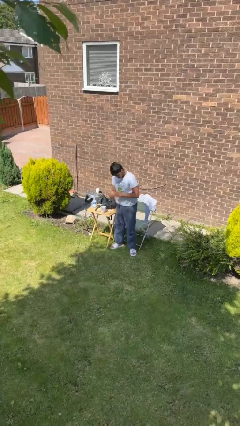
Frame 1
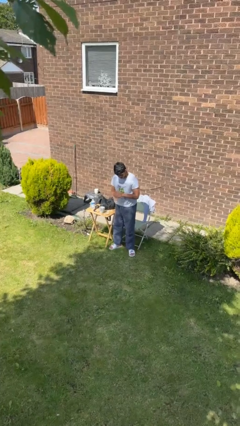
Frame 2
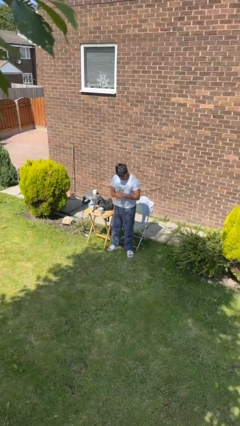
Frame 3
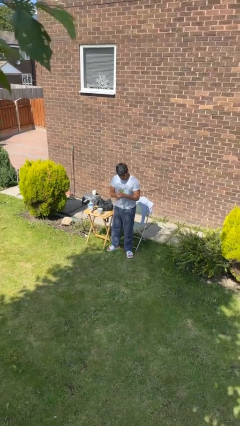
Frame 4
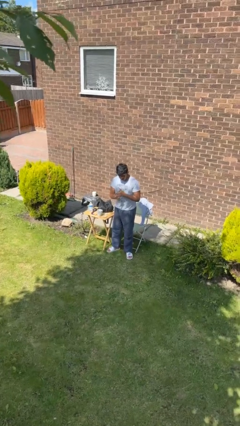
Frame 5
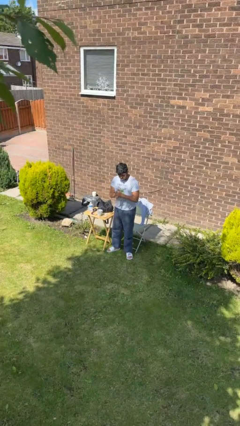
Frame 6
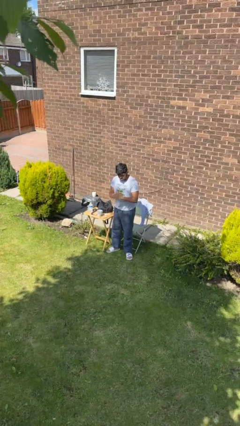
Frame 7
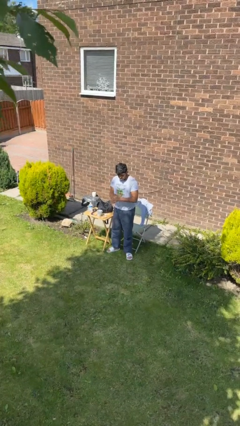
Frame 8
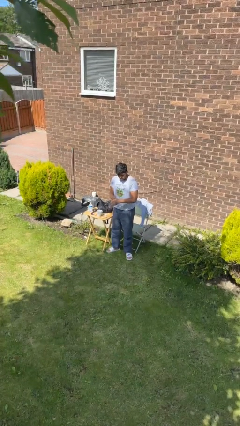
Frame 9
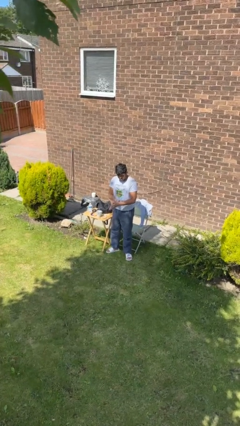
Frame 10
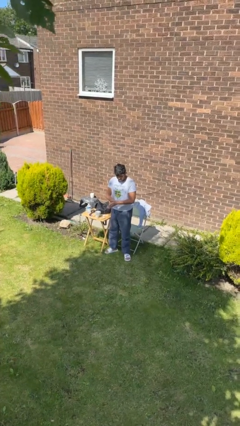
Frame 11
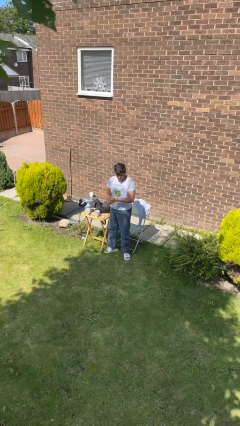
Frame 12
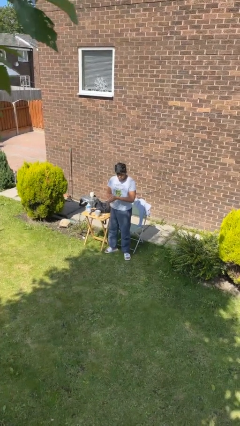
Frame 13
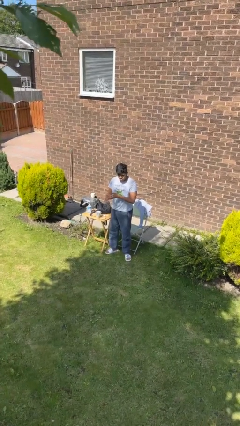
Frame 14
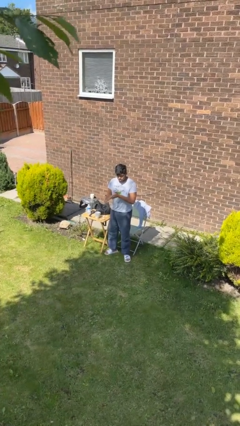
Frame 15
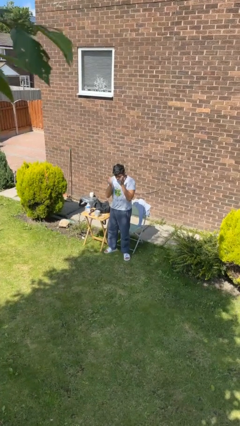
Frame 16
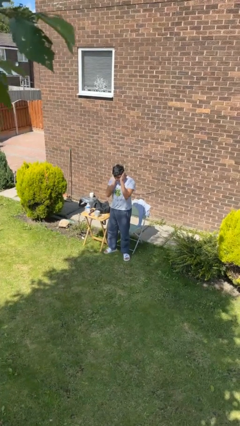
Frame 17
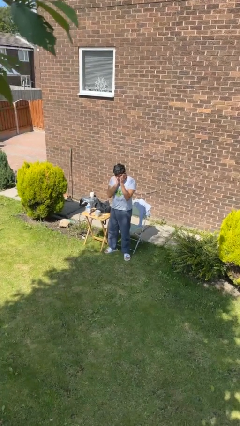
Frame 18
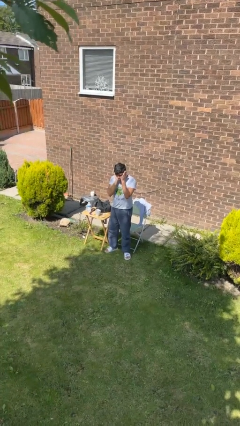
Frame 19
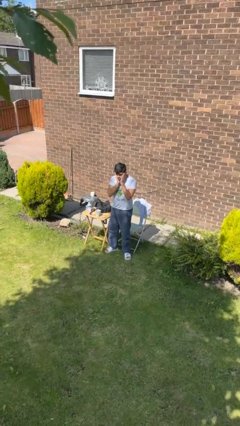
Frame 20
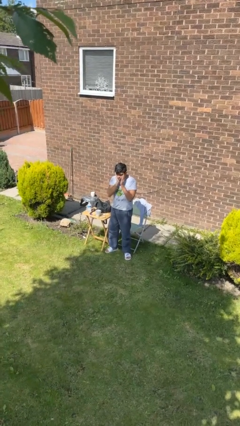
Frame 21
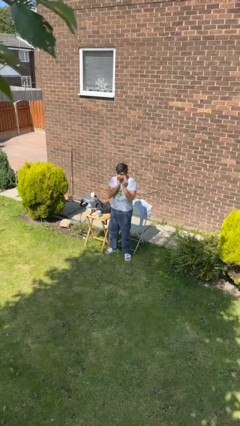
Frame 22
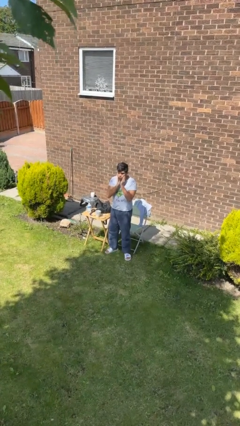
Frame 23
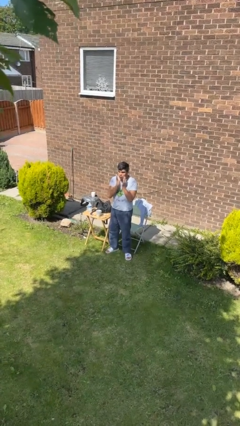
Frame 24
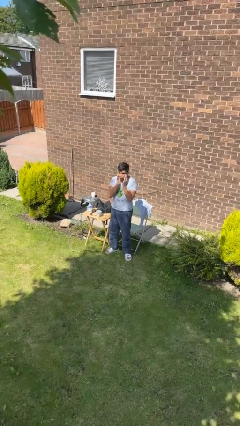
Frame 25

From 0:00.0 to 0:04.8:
person applies facial moisturizer

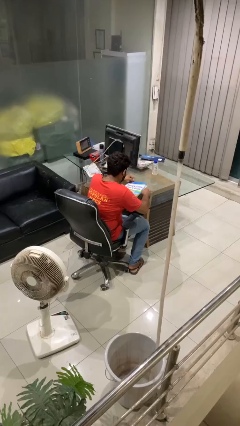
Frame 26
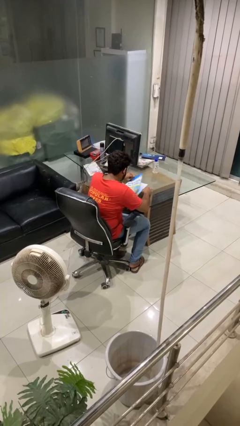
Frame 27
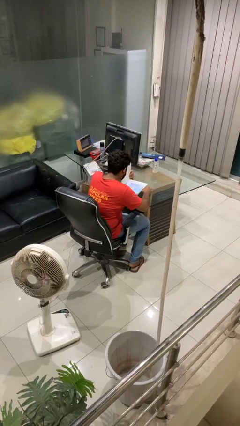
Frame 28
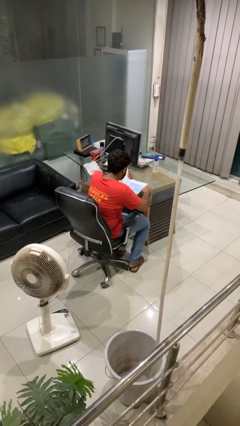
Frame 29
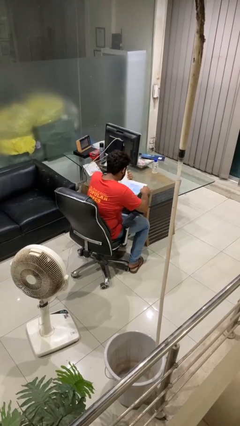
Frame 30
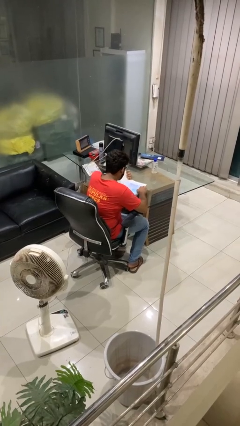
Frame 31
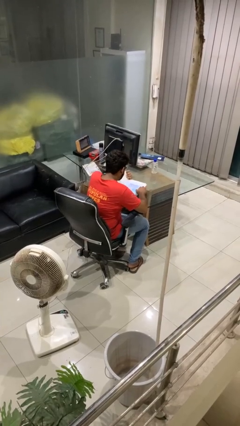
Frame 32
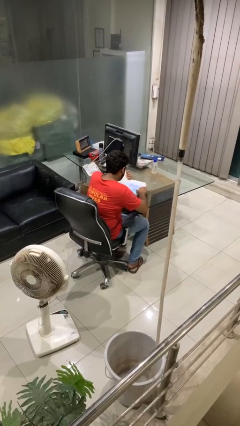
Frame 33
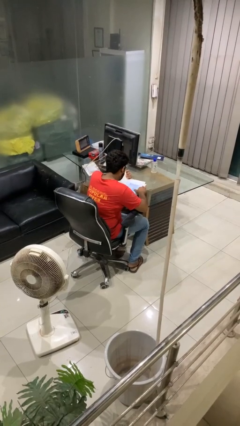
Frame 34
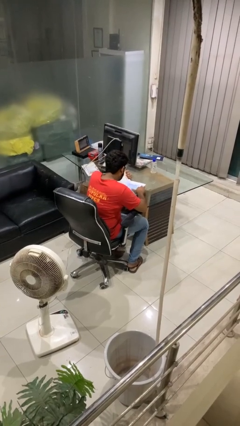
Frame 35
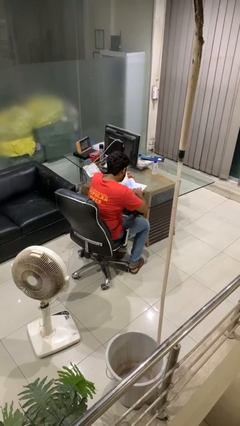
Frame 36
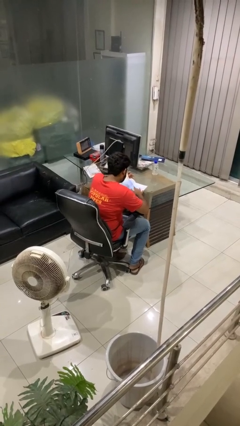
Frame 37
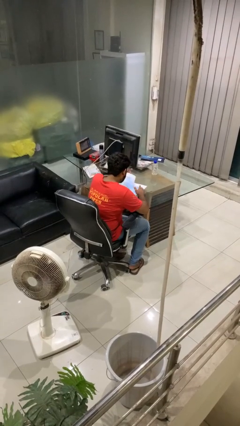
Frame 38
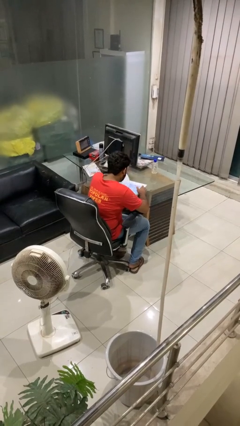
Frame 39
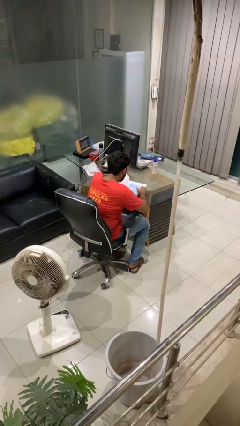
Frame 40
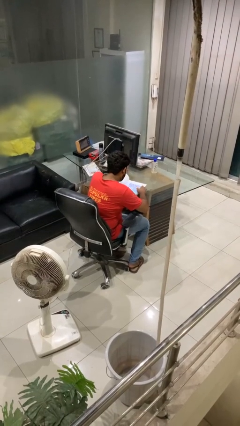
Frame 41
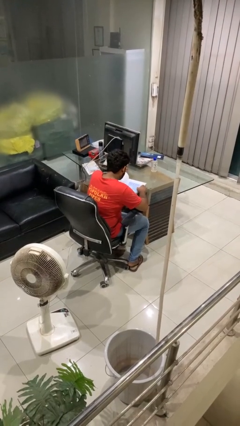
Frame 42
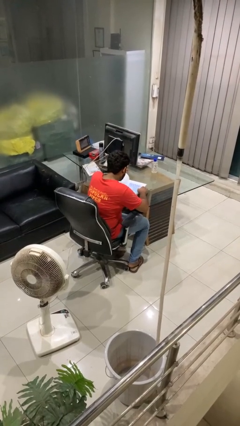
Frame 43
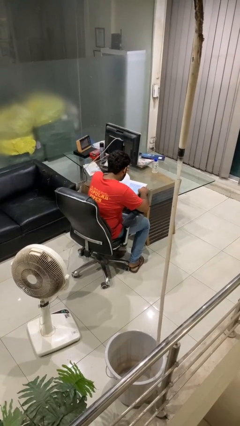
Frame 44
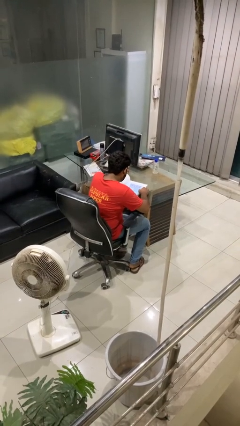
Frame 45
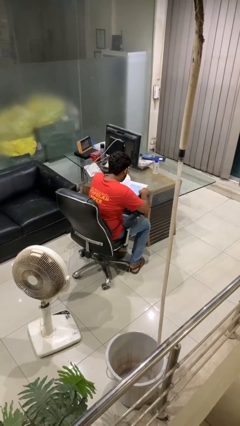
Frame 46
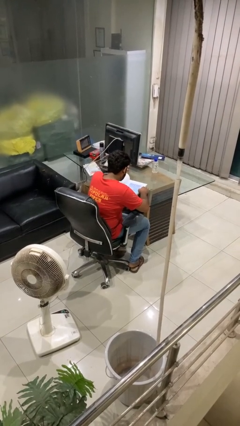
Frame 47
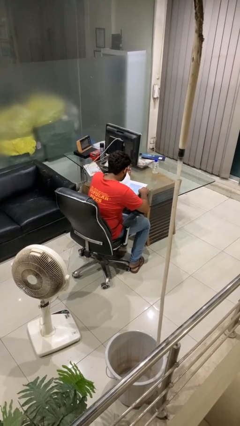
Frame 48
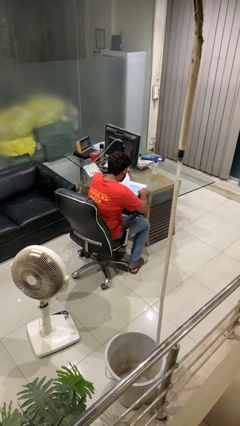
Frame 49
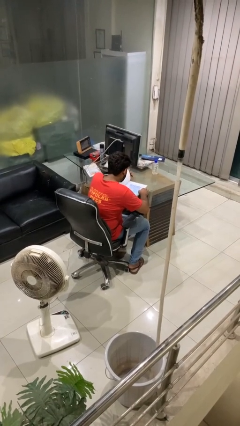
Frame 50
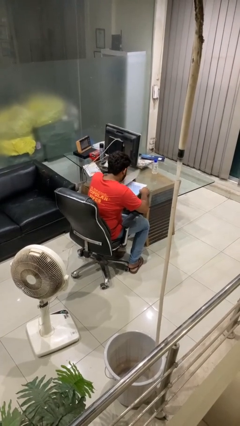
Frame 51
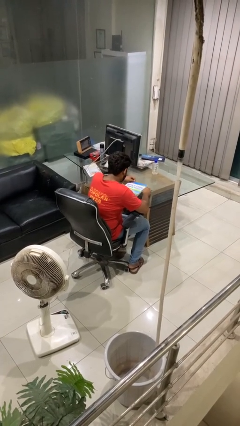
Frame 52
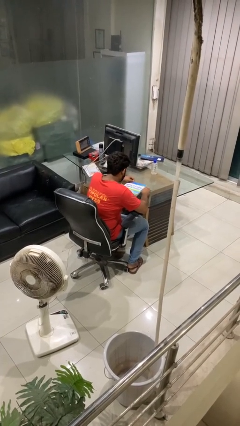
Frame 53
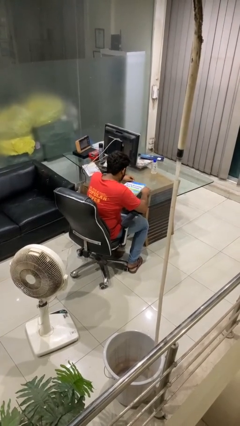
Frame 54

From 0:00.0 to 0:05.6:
person reads book

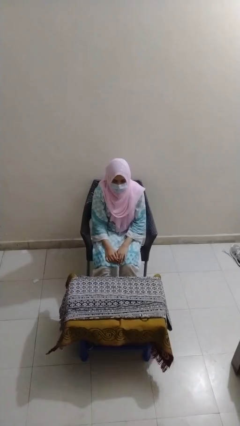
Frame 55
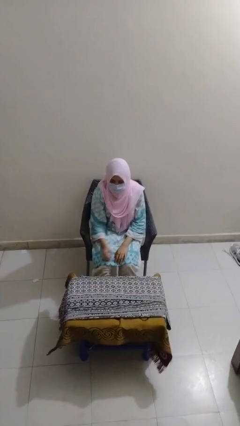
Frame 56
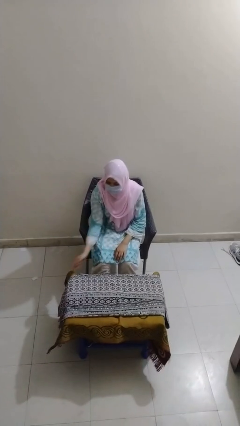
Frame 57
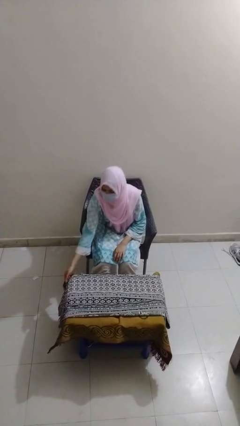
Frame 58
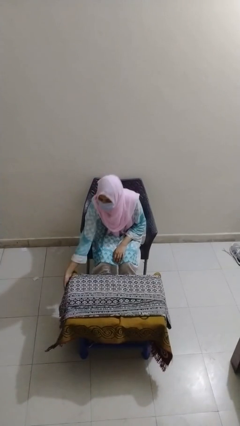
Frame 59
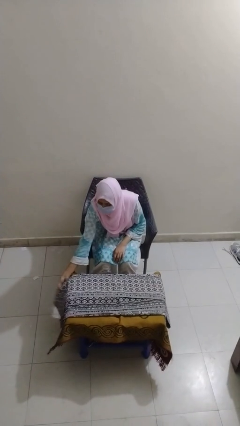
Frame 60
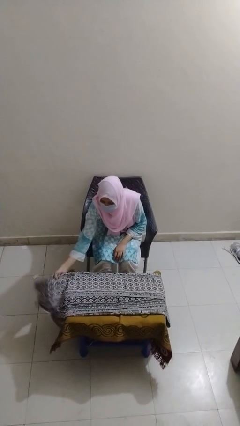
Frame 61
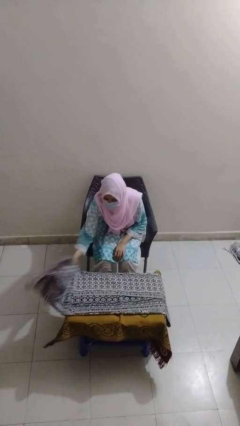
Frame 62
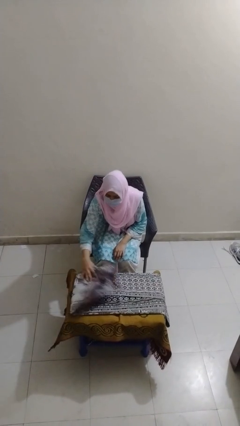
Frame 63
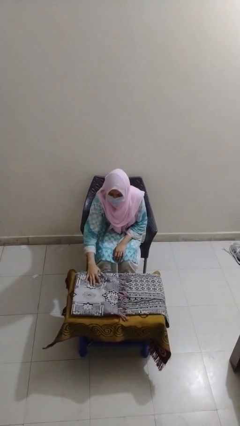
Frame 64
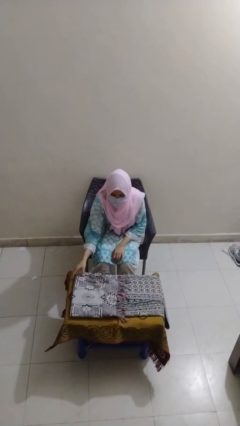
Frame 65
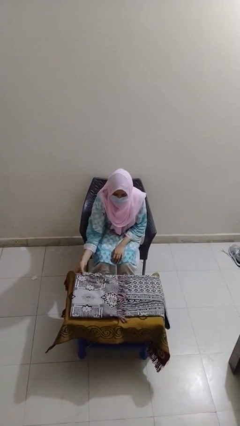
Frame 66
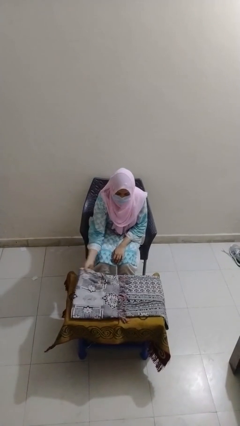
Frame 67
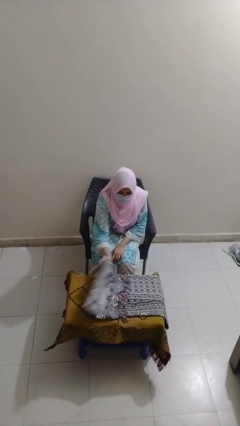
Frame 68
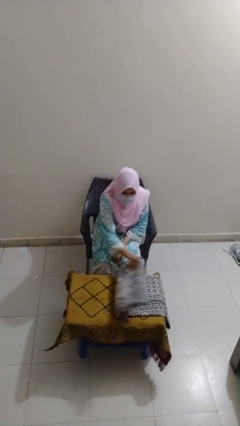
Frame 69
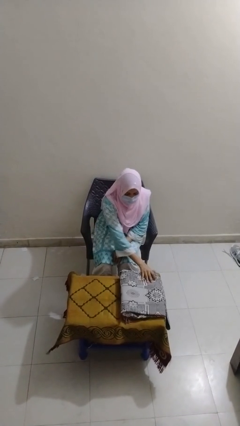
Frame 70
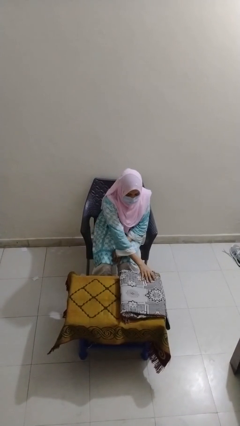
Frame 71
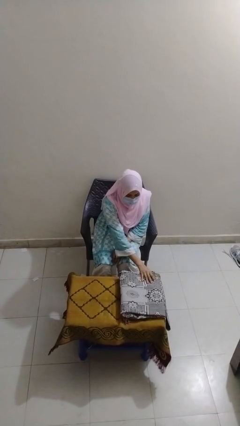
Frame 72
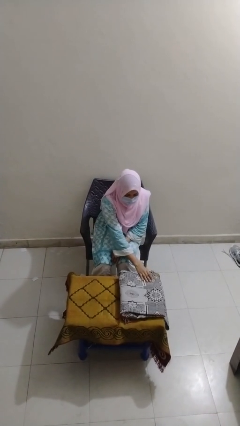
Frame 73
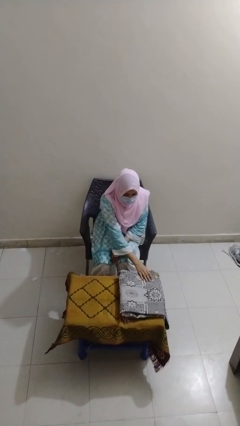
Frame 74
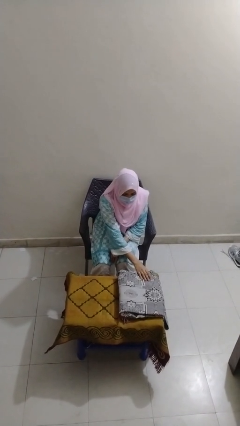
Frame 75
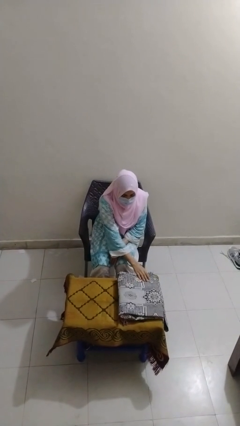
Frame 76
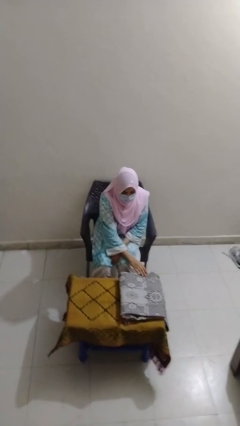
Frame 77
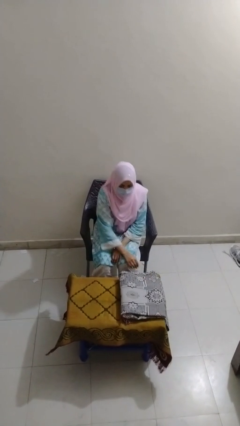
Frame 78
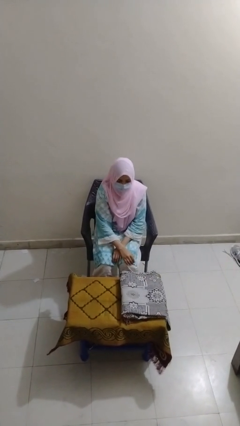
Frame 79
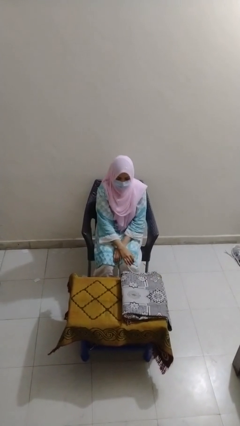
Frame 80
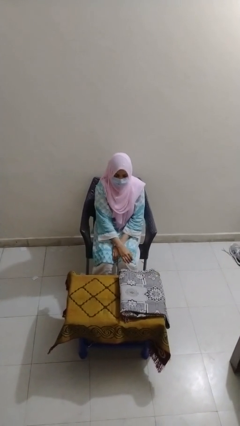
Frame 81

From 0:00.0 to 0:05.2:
person folds blanket

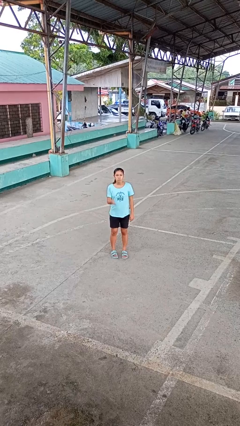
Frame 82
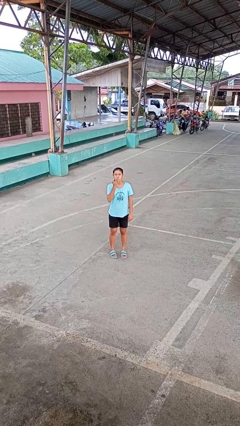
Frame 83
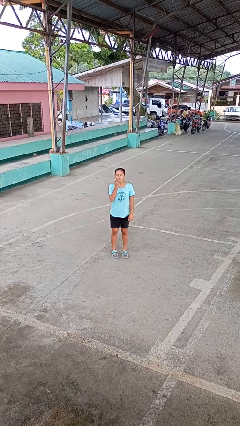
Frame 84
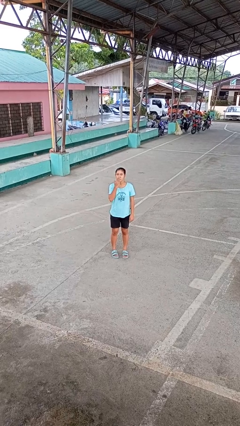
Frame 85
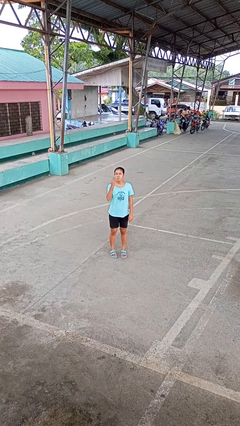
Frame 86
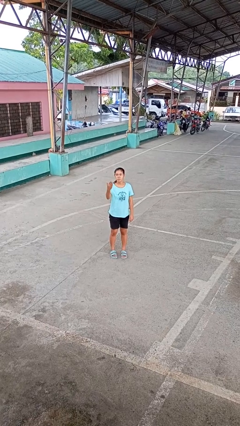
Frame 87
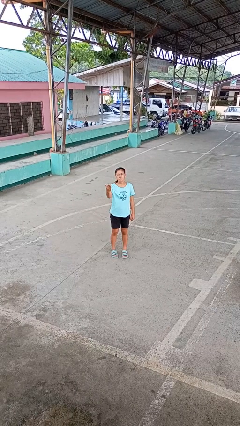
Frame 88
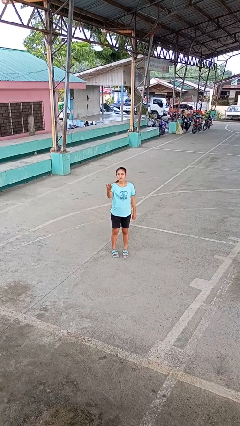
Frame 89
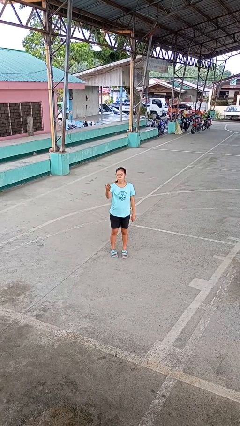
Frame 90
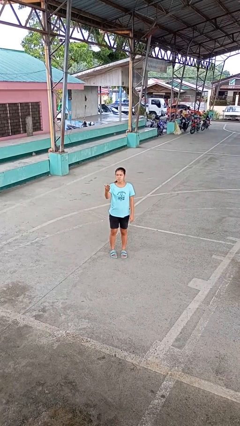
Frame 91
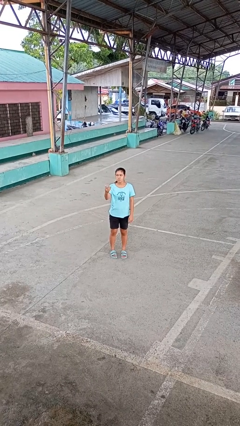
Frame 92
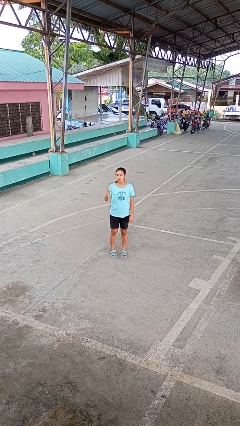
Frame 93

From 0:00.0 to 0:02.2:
person gestures blow kiss
